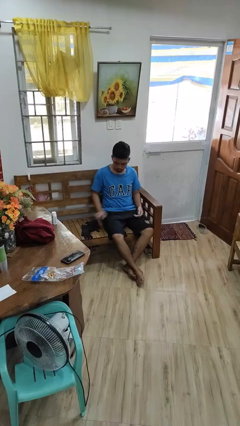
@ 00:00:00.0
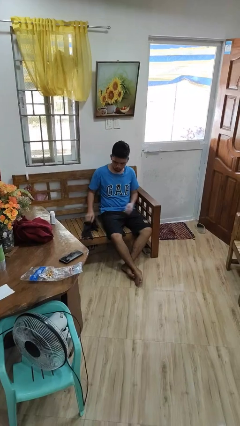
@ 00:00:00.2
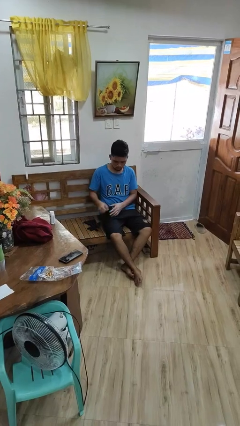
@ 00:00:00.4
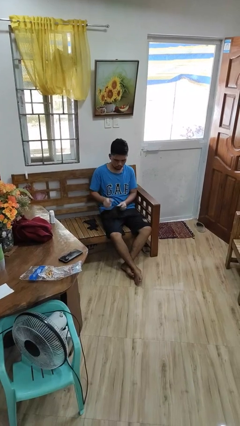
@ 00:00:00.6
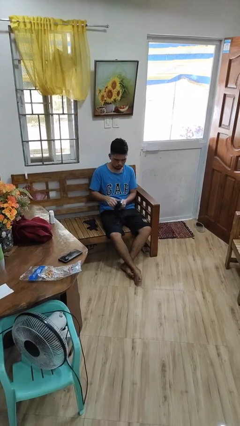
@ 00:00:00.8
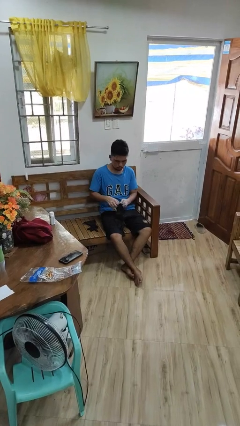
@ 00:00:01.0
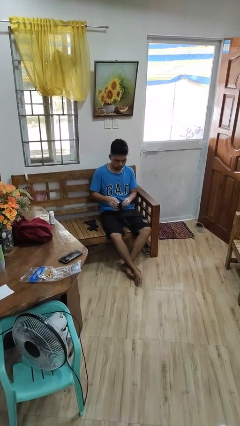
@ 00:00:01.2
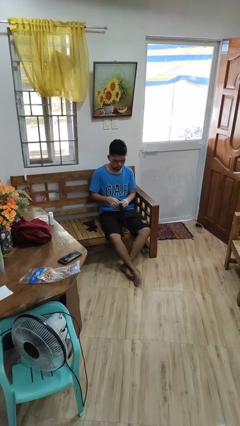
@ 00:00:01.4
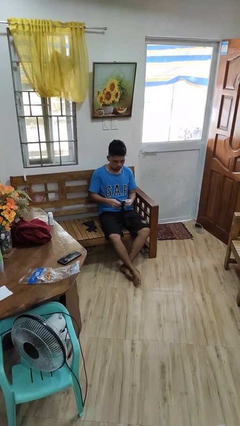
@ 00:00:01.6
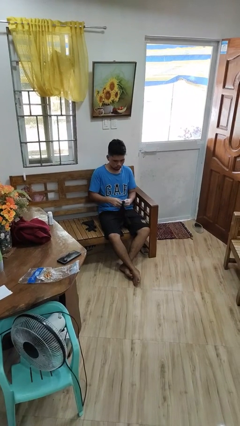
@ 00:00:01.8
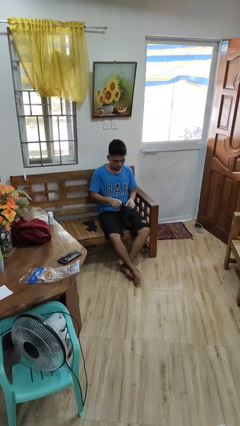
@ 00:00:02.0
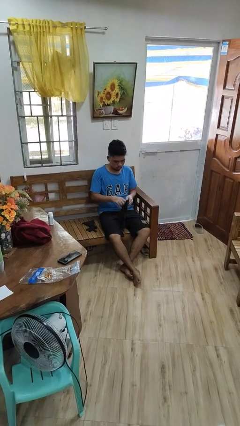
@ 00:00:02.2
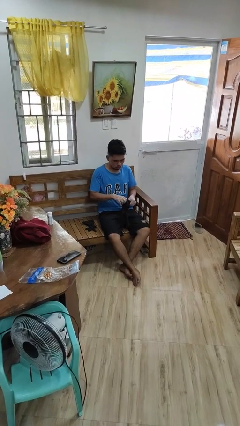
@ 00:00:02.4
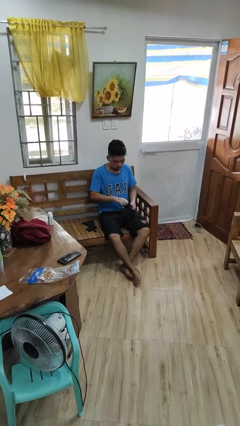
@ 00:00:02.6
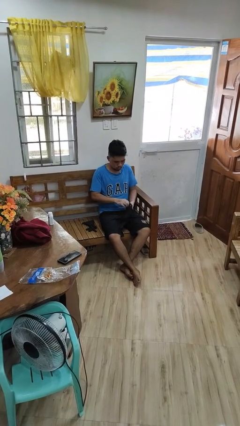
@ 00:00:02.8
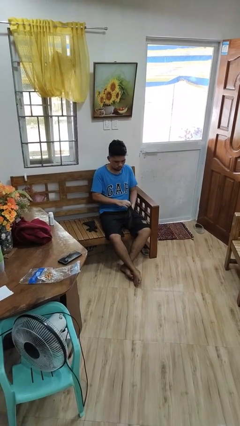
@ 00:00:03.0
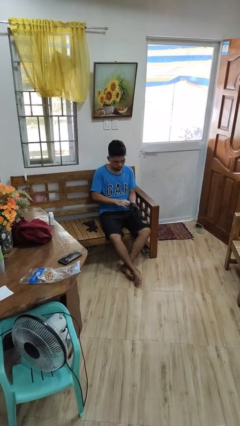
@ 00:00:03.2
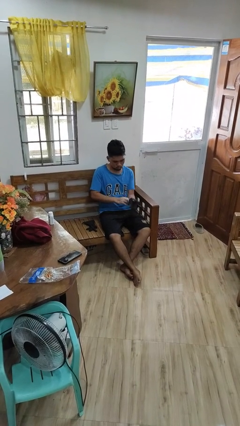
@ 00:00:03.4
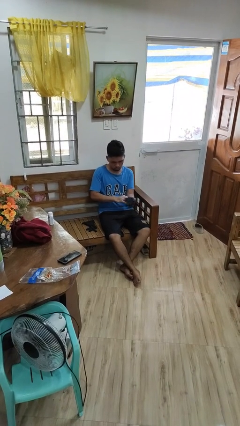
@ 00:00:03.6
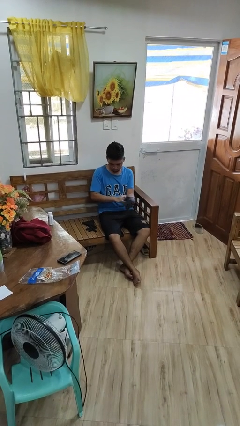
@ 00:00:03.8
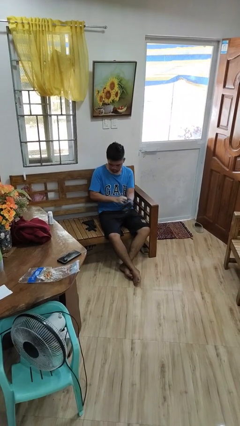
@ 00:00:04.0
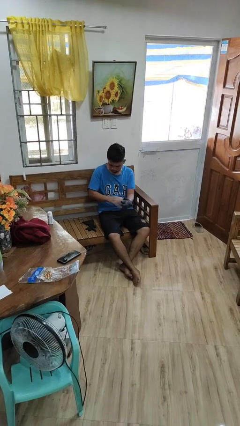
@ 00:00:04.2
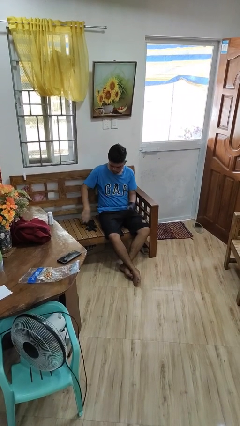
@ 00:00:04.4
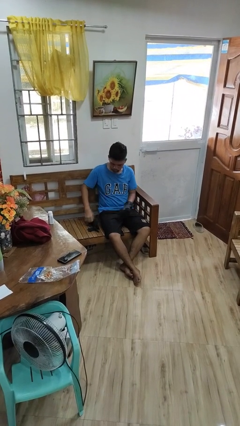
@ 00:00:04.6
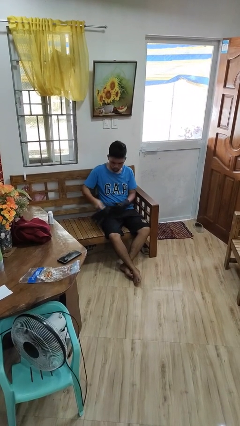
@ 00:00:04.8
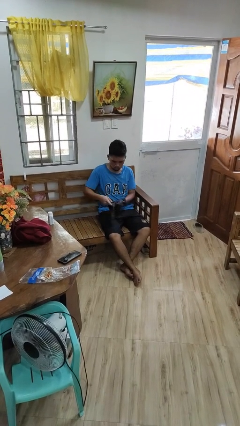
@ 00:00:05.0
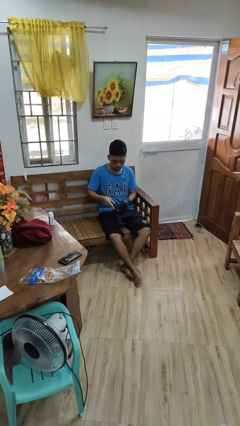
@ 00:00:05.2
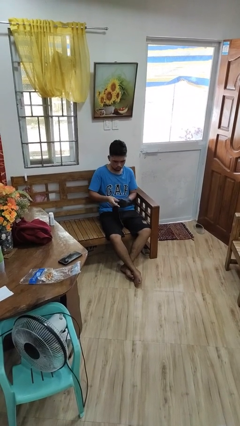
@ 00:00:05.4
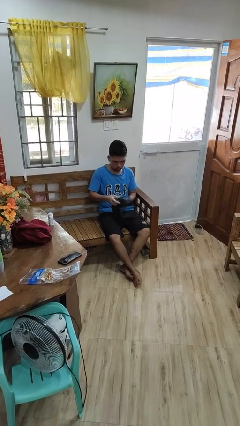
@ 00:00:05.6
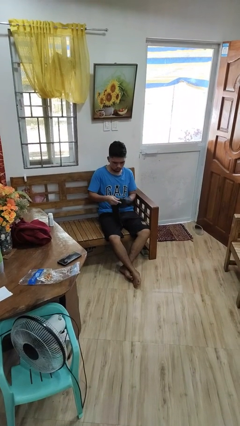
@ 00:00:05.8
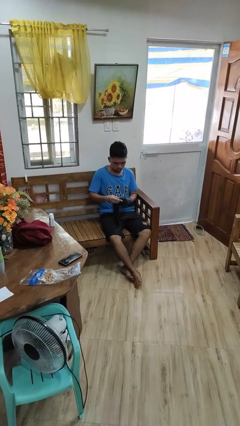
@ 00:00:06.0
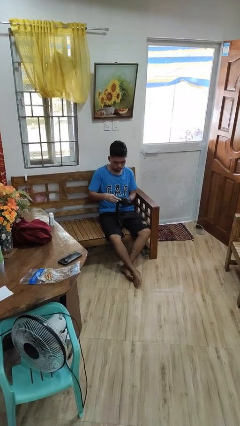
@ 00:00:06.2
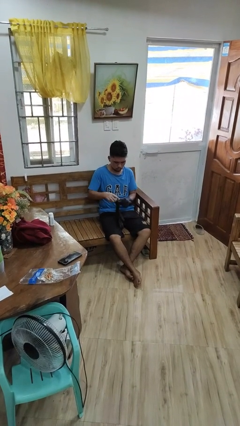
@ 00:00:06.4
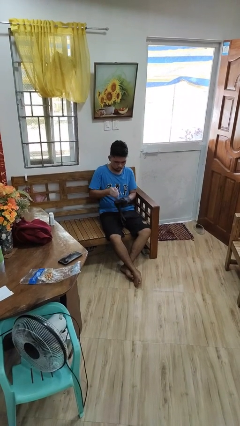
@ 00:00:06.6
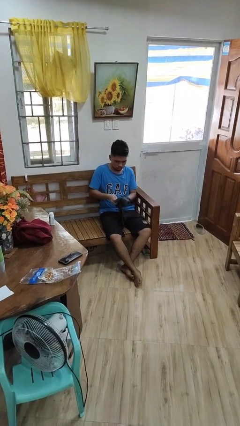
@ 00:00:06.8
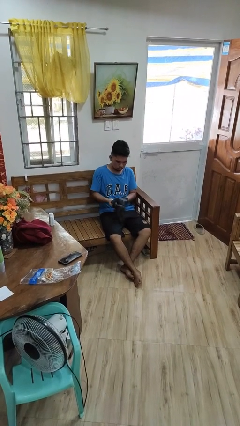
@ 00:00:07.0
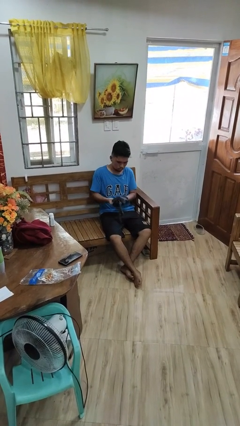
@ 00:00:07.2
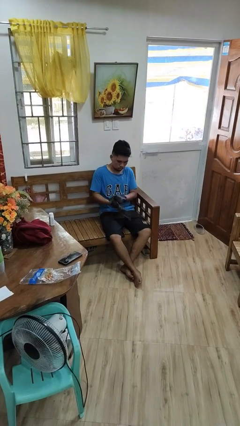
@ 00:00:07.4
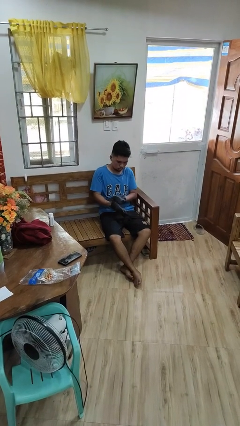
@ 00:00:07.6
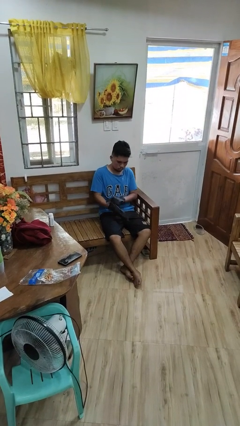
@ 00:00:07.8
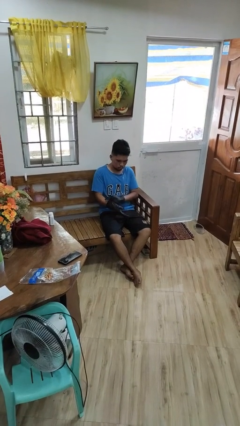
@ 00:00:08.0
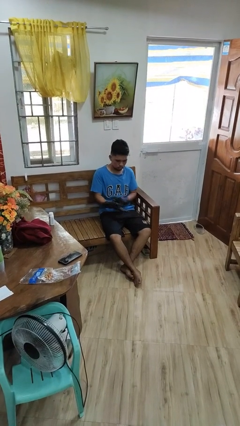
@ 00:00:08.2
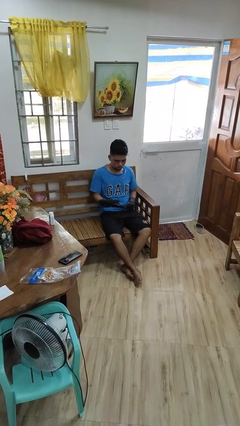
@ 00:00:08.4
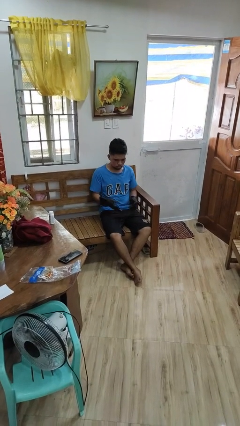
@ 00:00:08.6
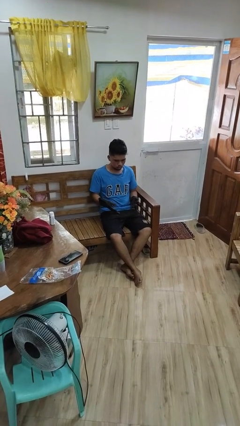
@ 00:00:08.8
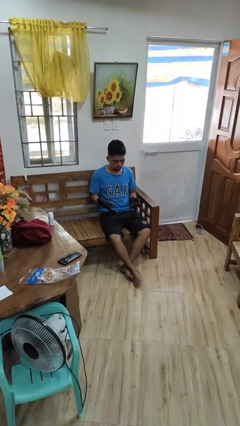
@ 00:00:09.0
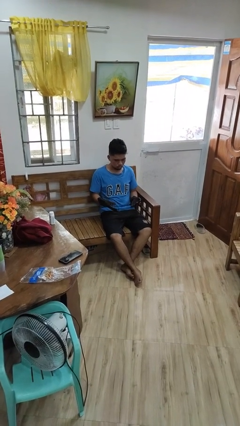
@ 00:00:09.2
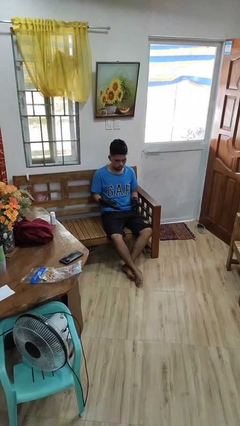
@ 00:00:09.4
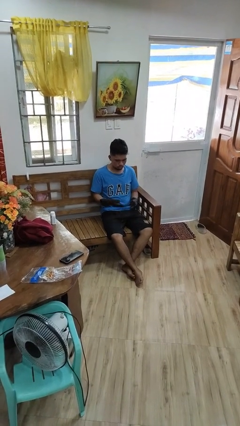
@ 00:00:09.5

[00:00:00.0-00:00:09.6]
person puts on gloves

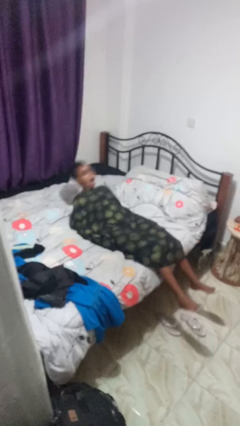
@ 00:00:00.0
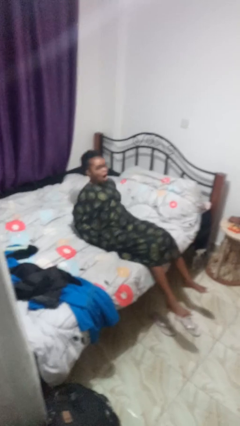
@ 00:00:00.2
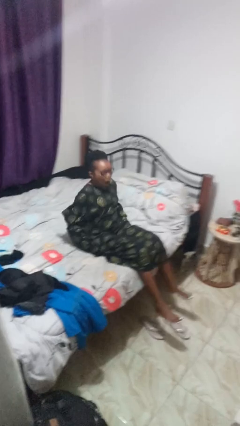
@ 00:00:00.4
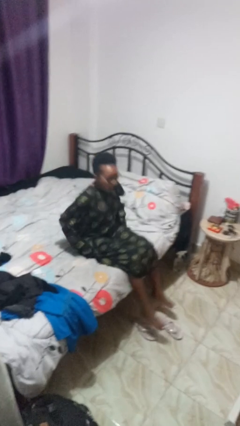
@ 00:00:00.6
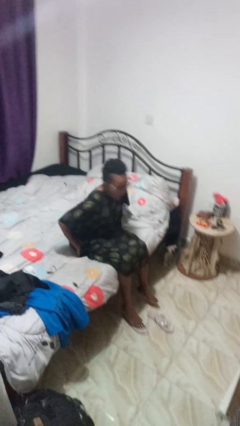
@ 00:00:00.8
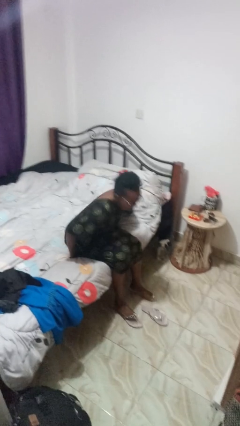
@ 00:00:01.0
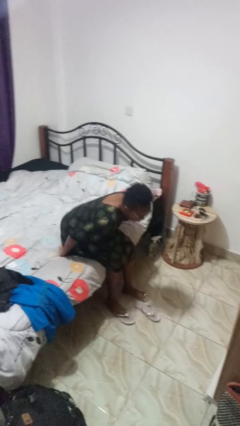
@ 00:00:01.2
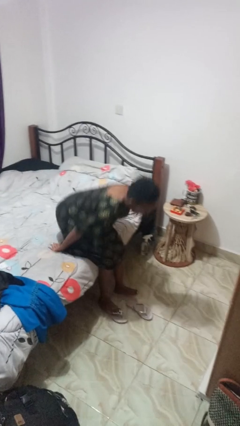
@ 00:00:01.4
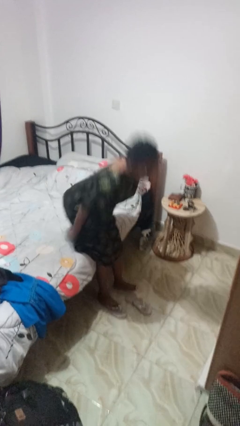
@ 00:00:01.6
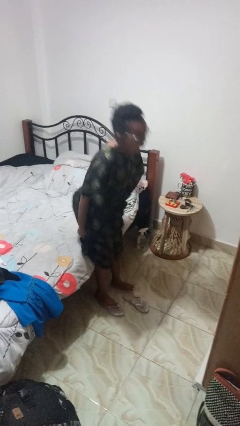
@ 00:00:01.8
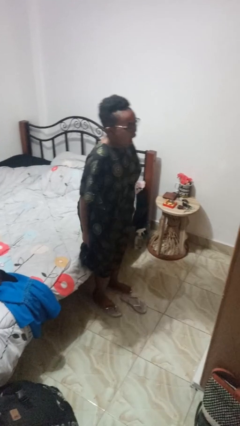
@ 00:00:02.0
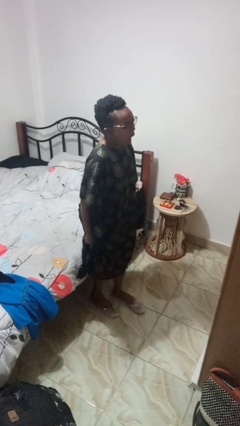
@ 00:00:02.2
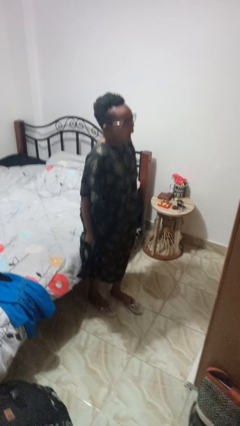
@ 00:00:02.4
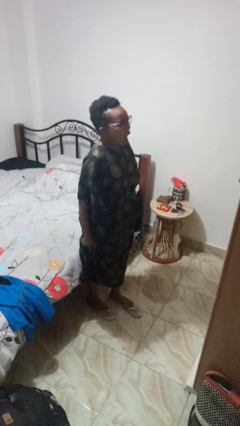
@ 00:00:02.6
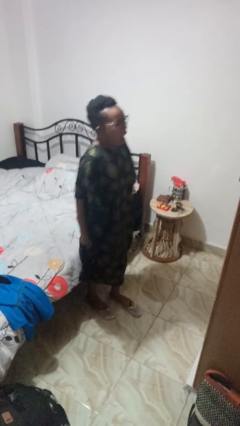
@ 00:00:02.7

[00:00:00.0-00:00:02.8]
person stands up

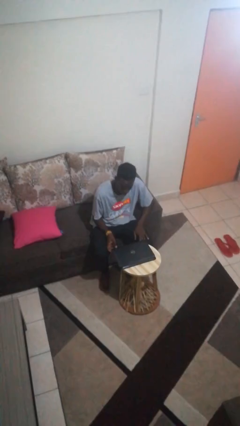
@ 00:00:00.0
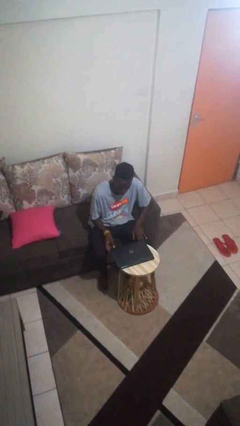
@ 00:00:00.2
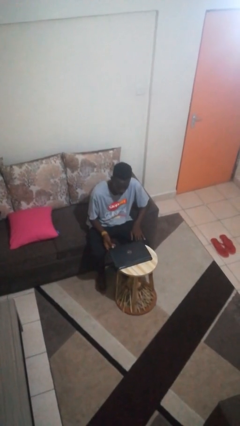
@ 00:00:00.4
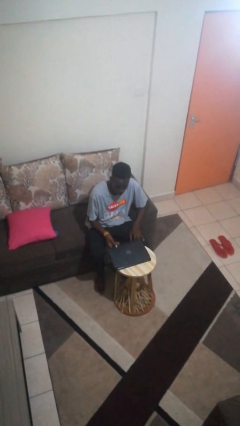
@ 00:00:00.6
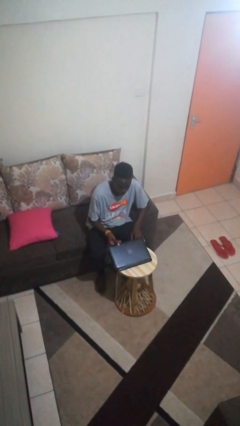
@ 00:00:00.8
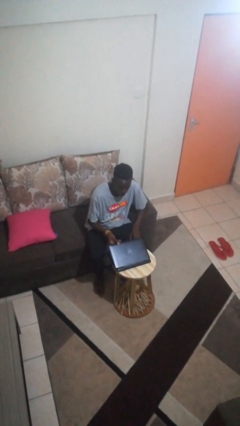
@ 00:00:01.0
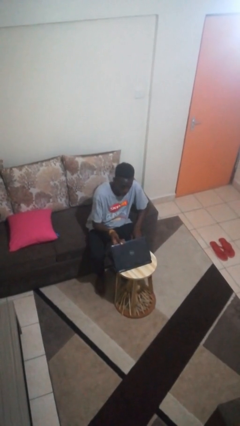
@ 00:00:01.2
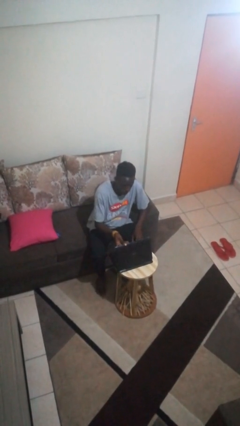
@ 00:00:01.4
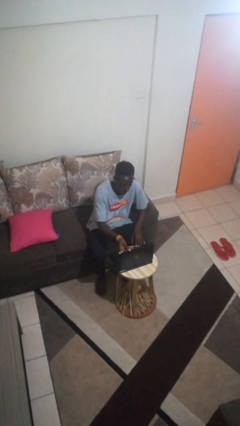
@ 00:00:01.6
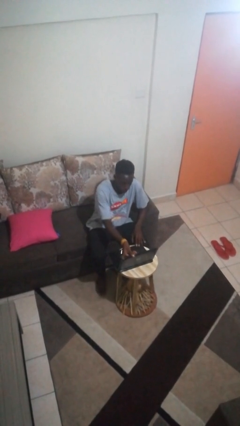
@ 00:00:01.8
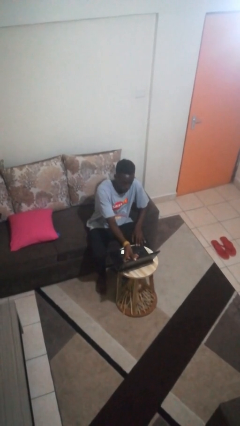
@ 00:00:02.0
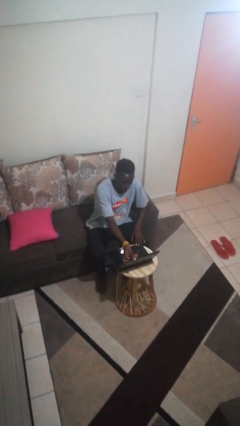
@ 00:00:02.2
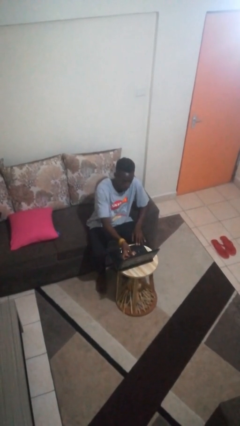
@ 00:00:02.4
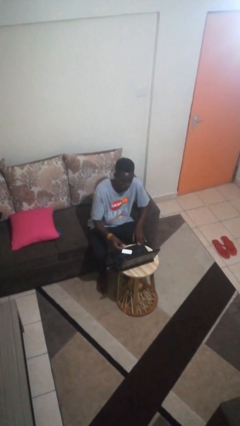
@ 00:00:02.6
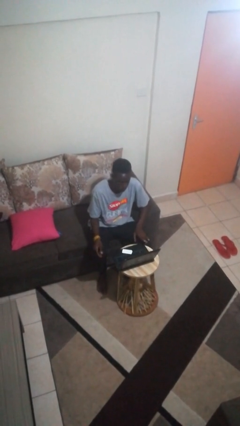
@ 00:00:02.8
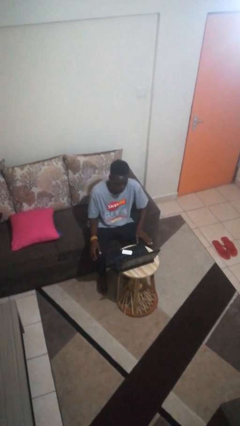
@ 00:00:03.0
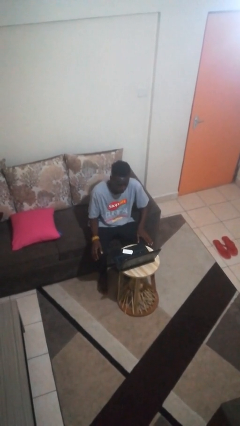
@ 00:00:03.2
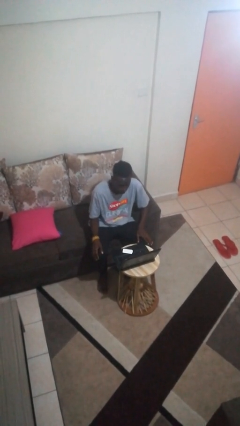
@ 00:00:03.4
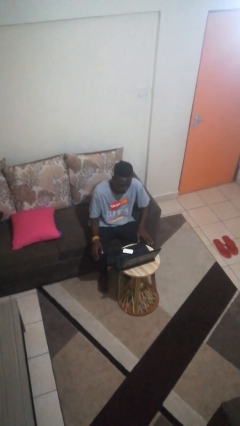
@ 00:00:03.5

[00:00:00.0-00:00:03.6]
person opens laptop

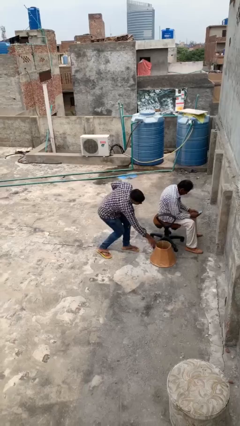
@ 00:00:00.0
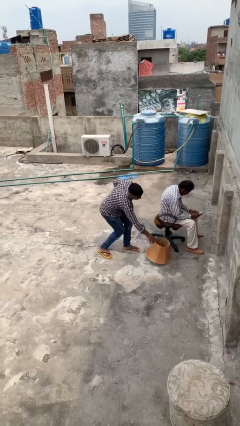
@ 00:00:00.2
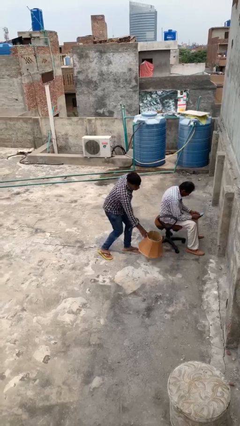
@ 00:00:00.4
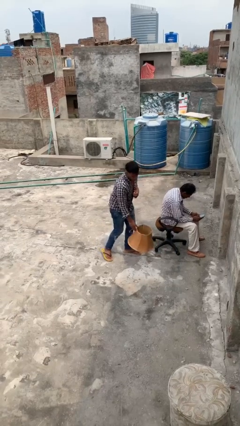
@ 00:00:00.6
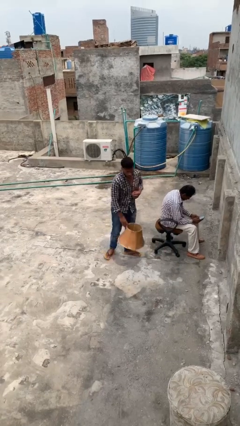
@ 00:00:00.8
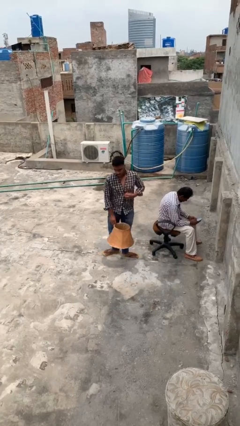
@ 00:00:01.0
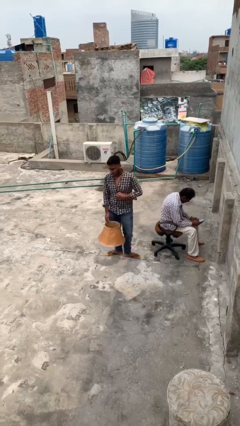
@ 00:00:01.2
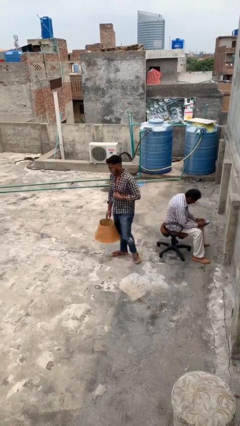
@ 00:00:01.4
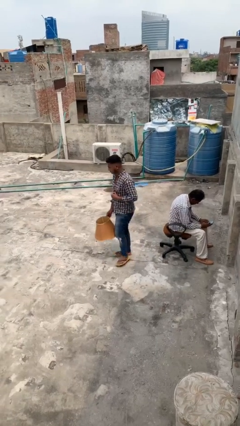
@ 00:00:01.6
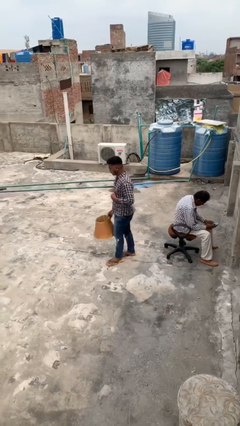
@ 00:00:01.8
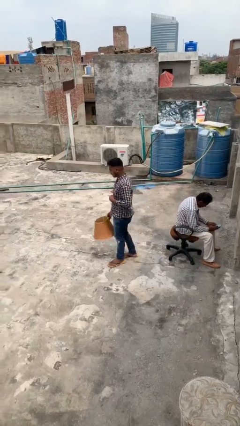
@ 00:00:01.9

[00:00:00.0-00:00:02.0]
person steals object from person
